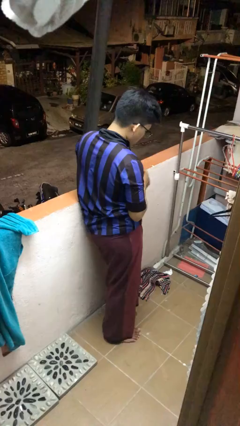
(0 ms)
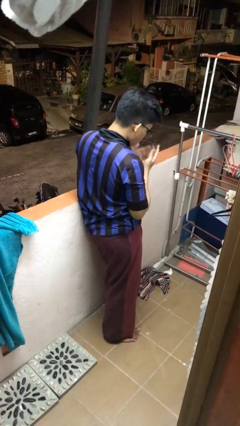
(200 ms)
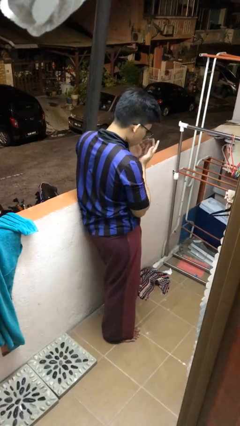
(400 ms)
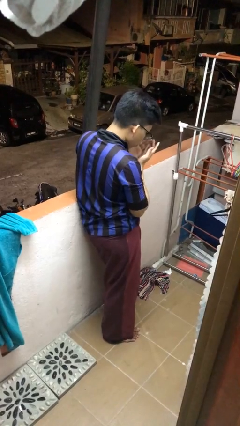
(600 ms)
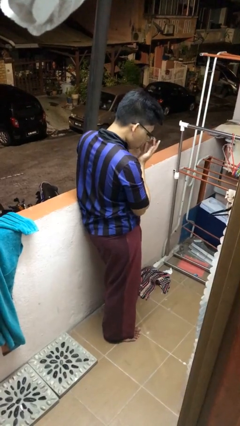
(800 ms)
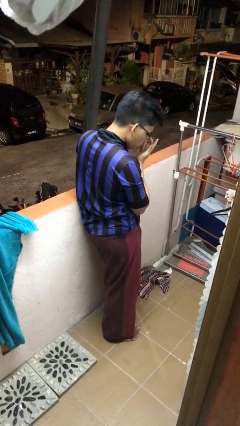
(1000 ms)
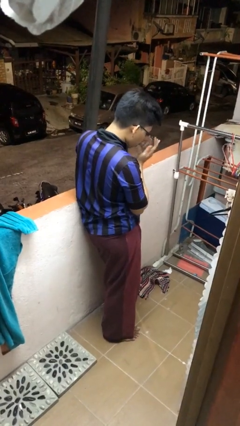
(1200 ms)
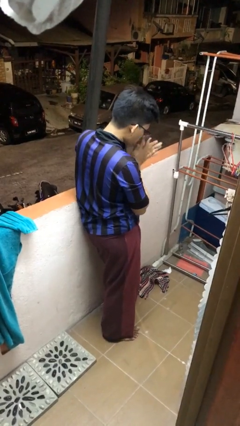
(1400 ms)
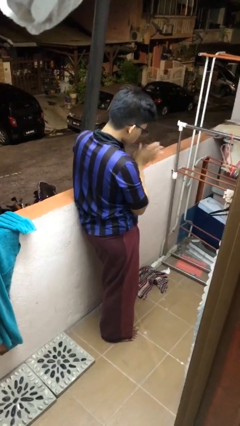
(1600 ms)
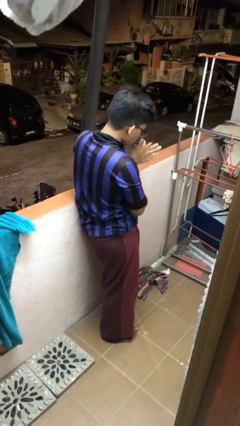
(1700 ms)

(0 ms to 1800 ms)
person blows into hands

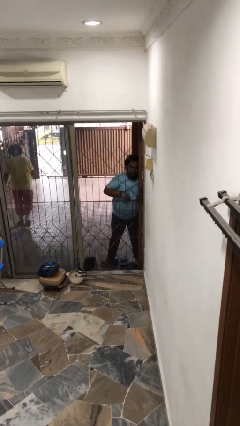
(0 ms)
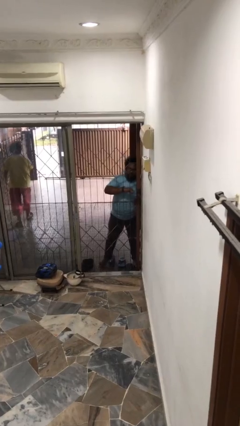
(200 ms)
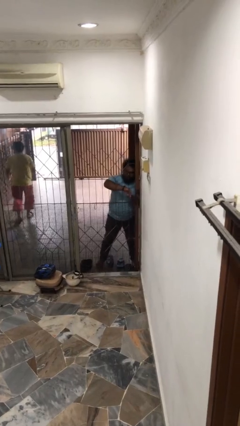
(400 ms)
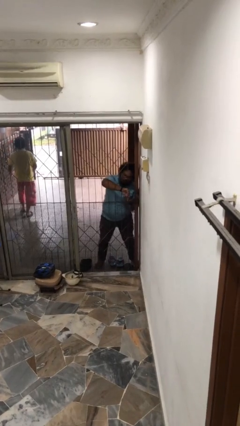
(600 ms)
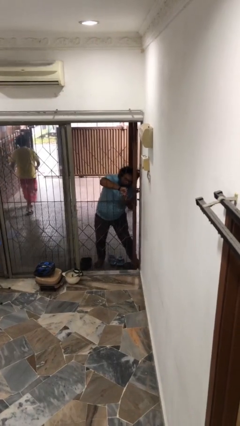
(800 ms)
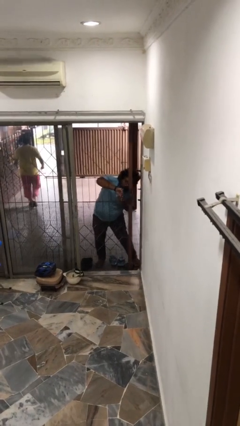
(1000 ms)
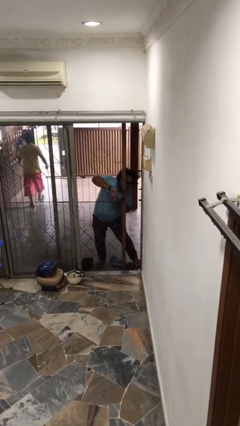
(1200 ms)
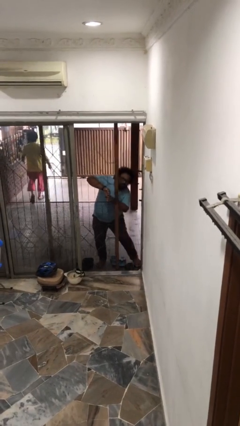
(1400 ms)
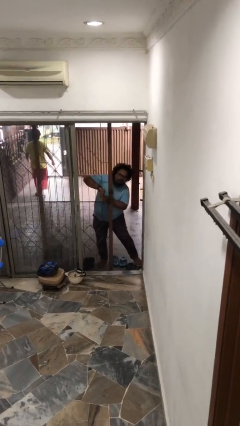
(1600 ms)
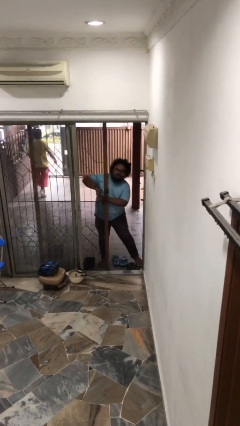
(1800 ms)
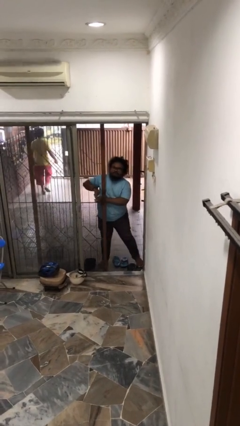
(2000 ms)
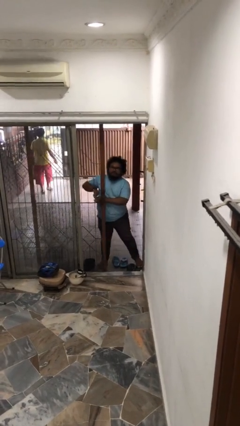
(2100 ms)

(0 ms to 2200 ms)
person opens facility door

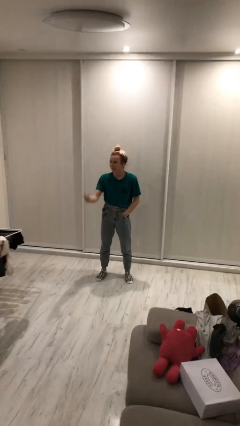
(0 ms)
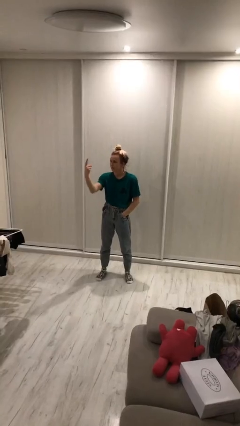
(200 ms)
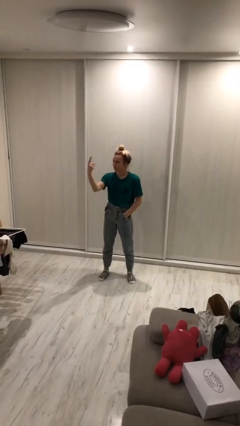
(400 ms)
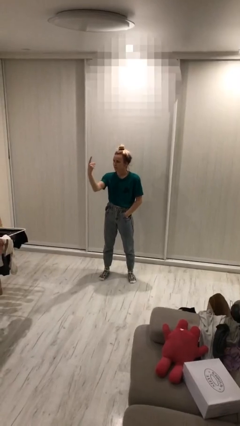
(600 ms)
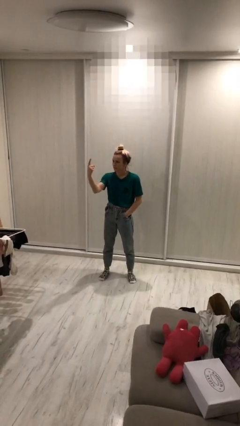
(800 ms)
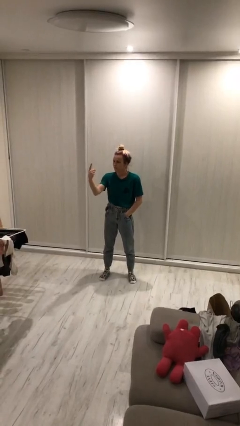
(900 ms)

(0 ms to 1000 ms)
person gestures number one

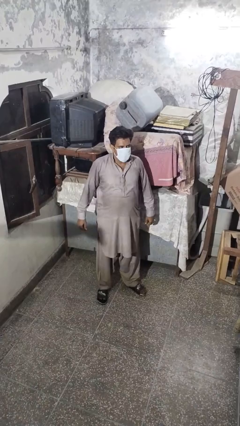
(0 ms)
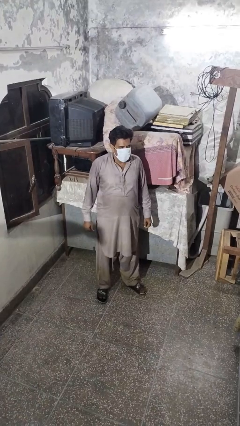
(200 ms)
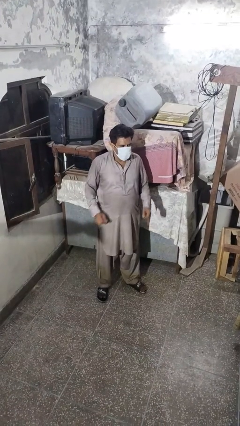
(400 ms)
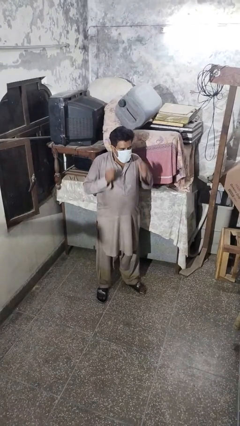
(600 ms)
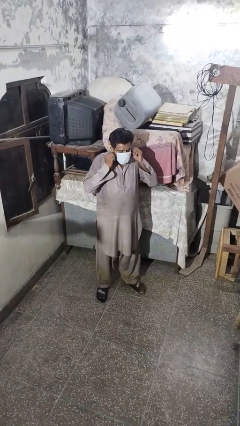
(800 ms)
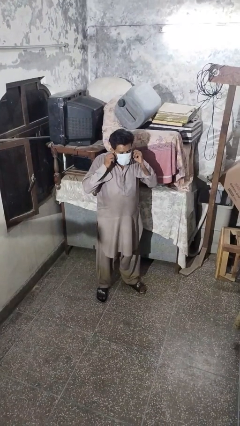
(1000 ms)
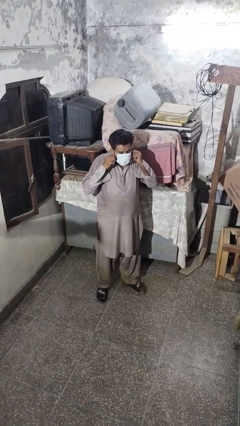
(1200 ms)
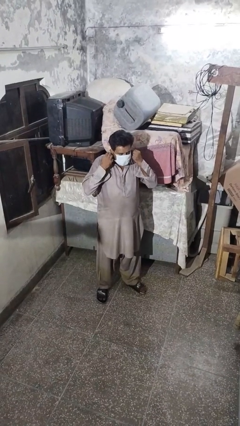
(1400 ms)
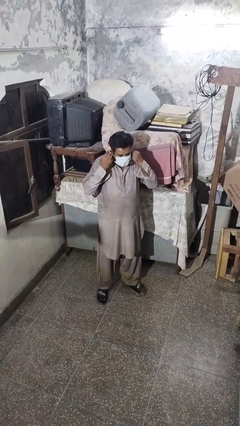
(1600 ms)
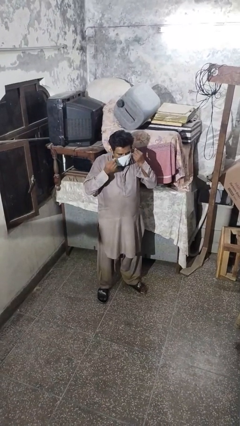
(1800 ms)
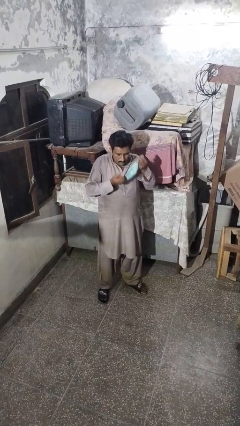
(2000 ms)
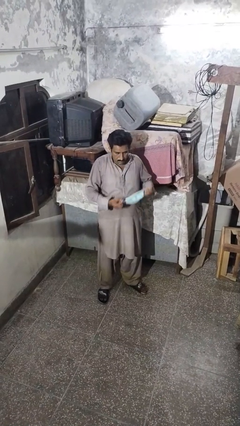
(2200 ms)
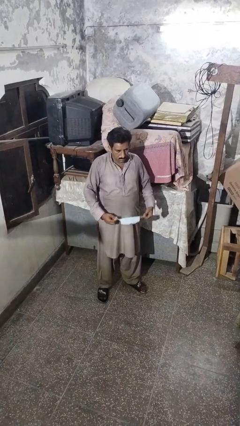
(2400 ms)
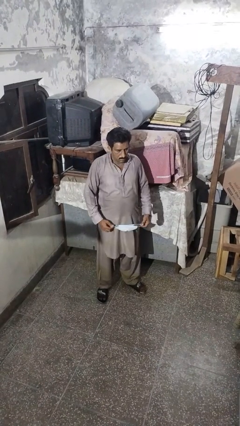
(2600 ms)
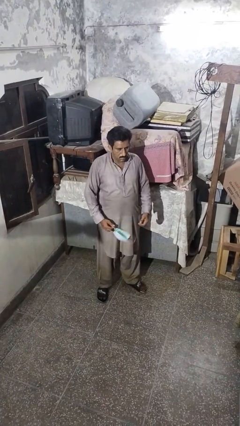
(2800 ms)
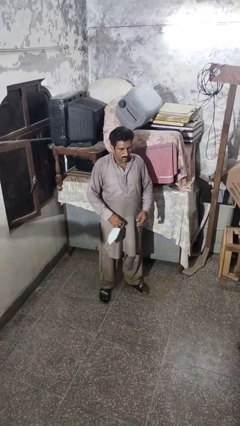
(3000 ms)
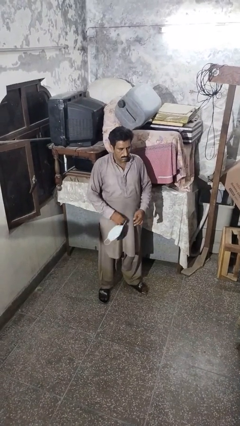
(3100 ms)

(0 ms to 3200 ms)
person takes off facemask

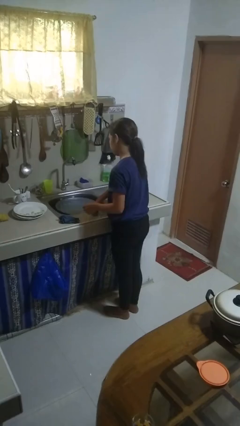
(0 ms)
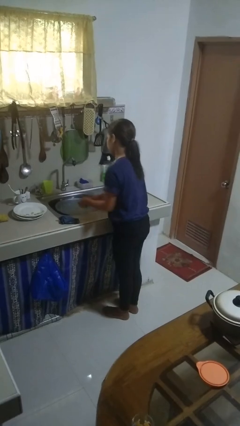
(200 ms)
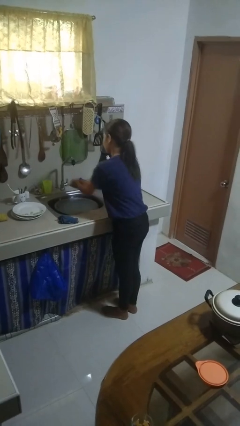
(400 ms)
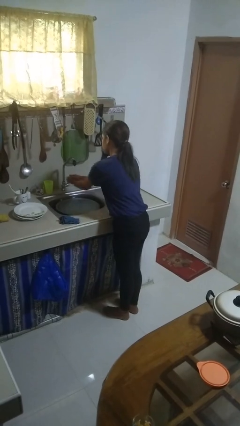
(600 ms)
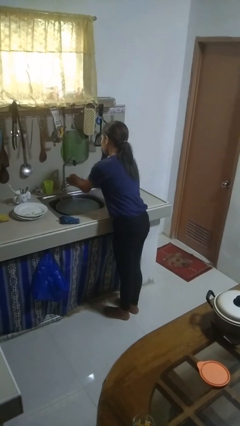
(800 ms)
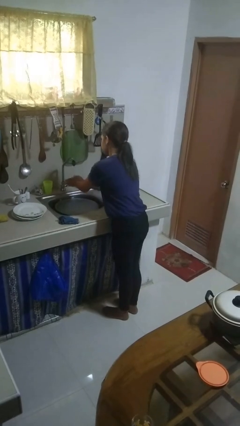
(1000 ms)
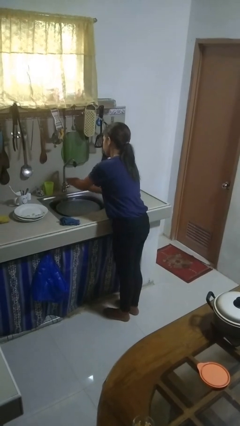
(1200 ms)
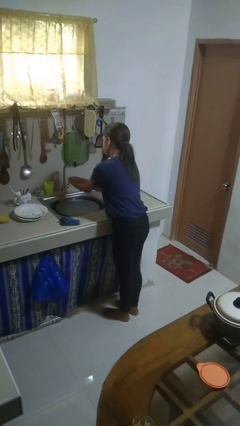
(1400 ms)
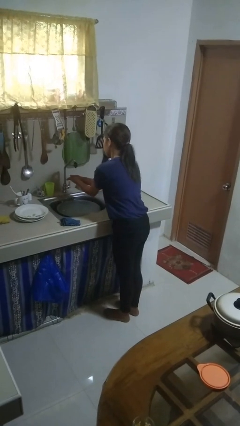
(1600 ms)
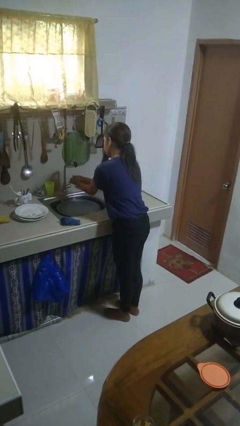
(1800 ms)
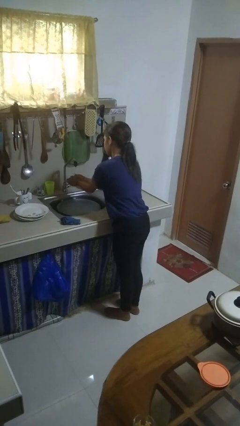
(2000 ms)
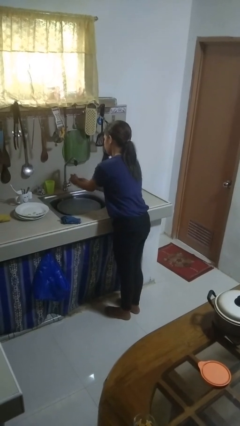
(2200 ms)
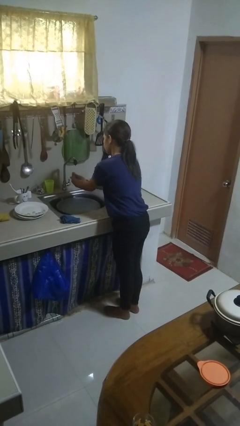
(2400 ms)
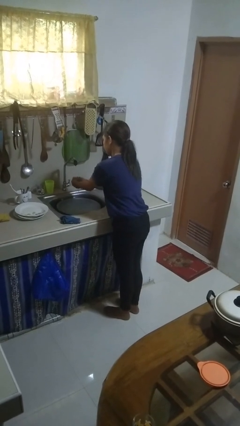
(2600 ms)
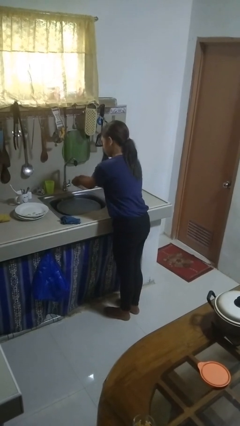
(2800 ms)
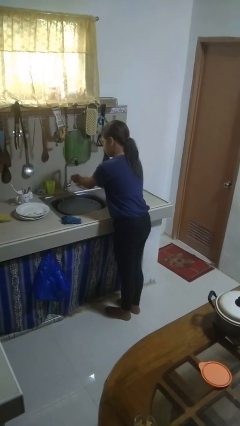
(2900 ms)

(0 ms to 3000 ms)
person washes hands

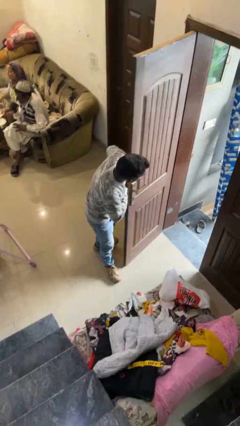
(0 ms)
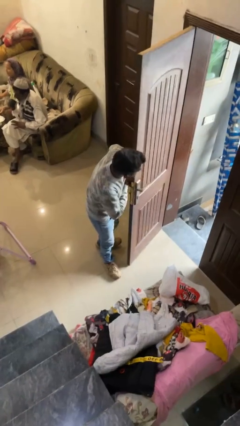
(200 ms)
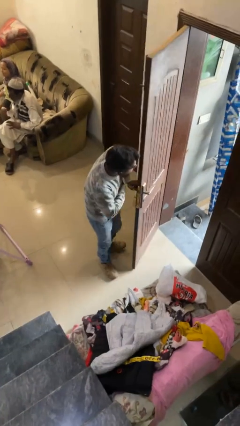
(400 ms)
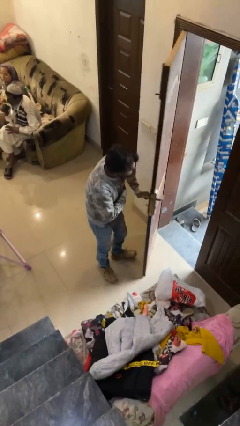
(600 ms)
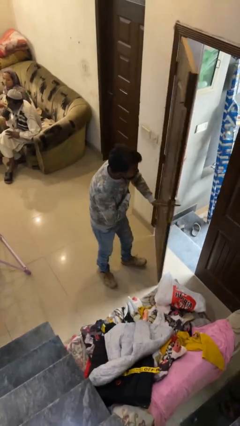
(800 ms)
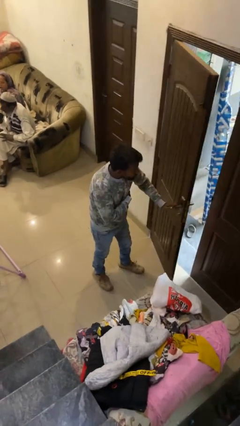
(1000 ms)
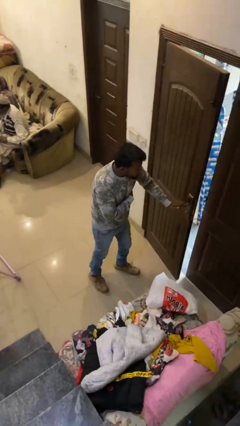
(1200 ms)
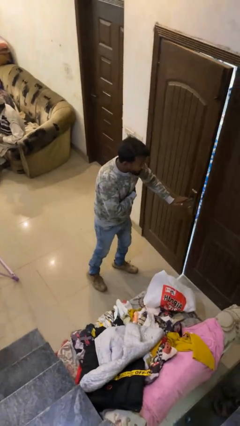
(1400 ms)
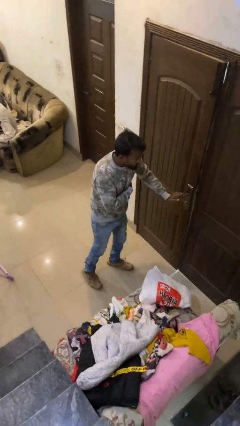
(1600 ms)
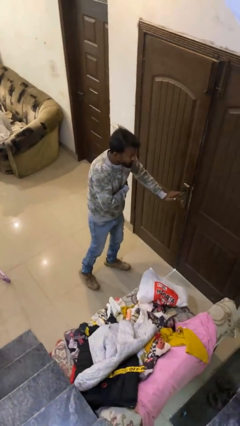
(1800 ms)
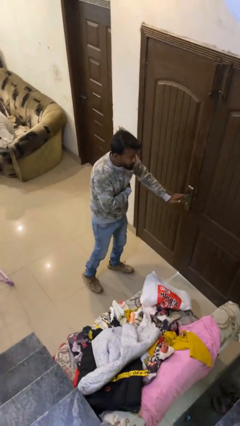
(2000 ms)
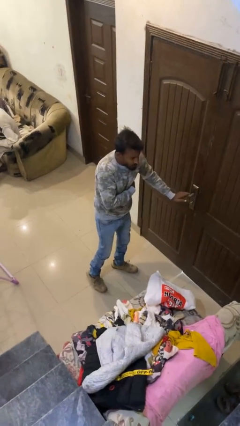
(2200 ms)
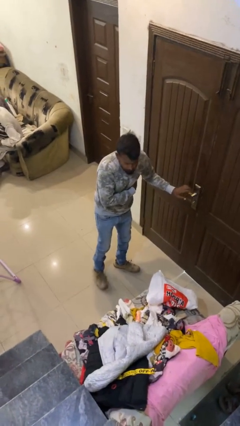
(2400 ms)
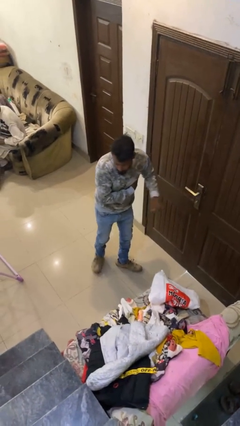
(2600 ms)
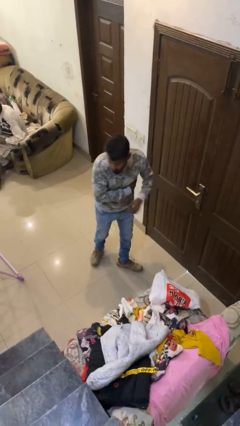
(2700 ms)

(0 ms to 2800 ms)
person closes facility door

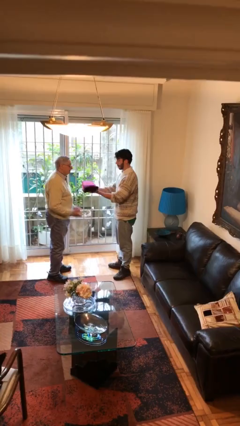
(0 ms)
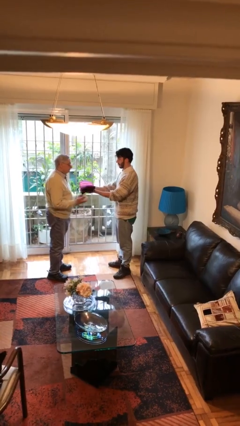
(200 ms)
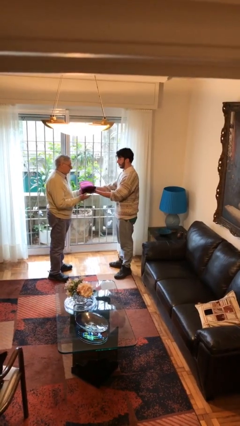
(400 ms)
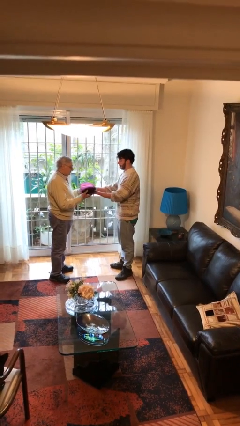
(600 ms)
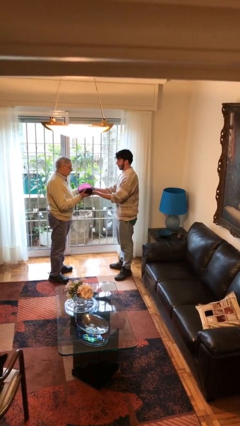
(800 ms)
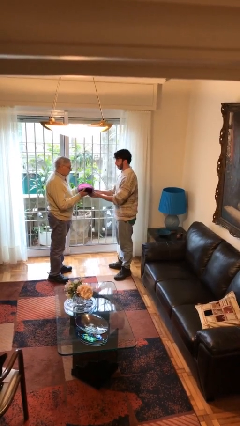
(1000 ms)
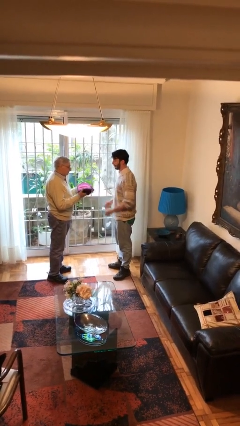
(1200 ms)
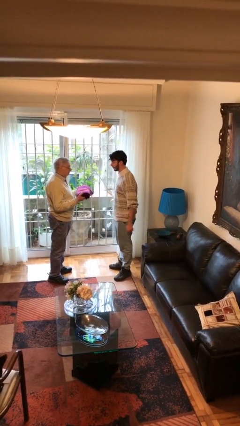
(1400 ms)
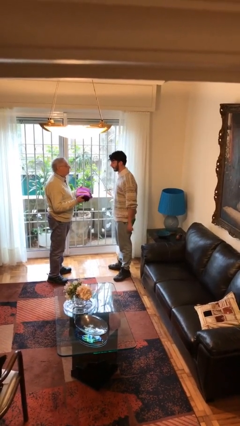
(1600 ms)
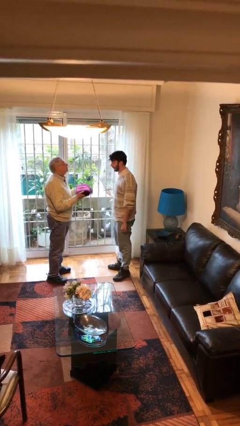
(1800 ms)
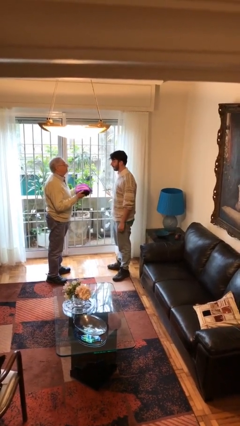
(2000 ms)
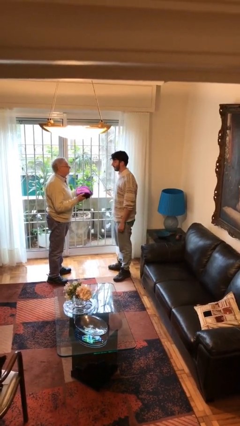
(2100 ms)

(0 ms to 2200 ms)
person transfers object to person

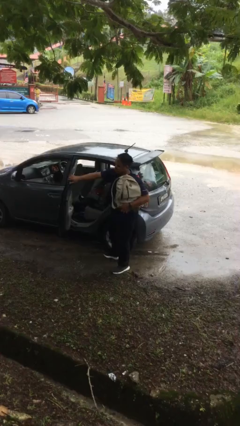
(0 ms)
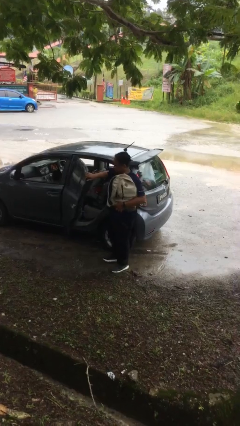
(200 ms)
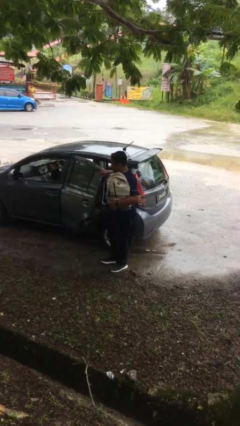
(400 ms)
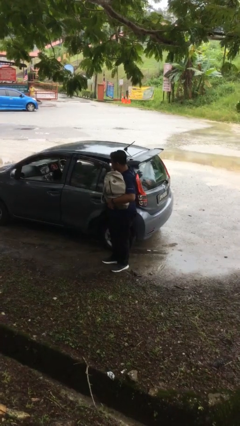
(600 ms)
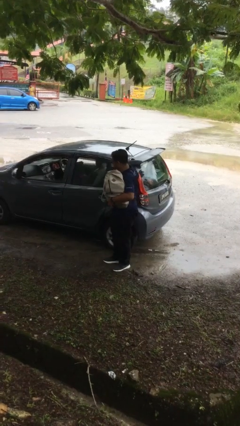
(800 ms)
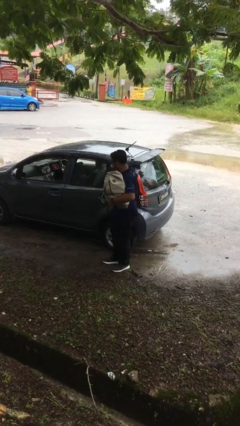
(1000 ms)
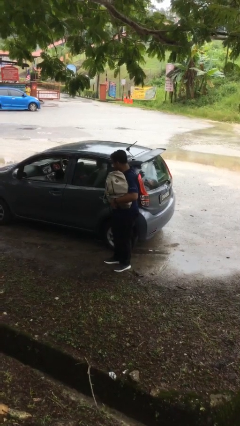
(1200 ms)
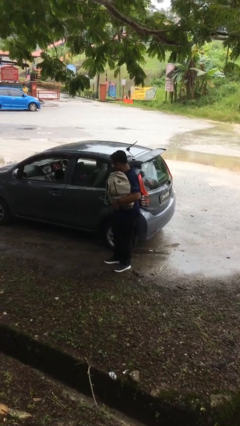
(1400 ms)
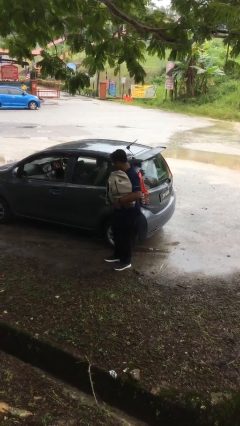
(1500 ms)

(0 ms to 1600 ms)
person closes car door
